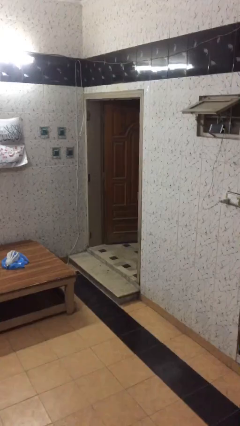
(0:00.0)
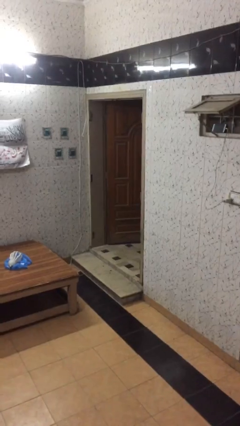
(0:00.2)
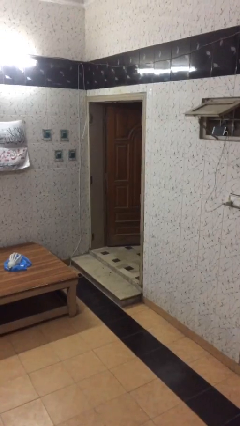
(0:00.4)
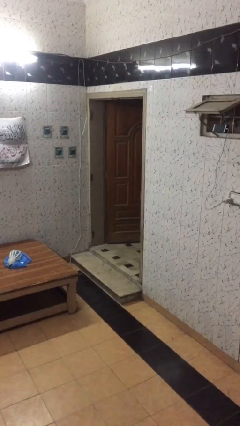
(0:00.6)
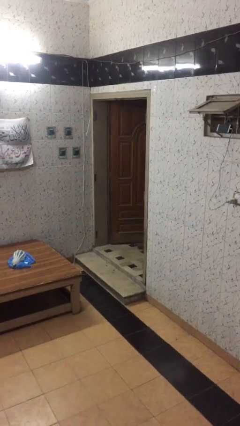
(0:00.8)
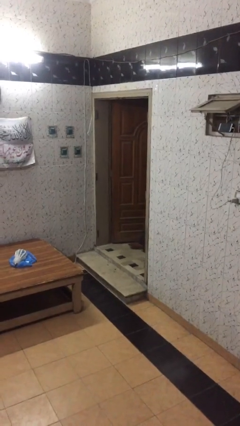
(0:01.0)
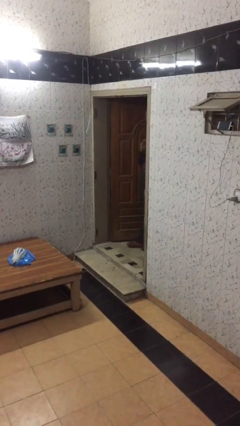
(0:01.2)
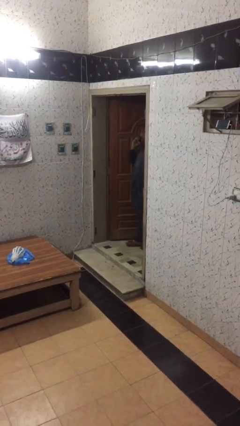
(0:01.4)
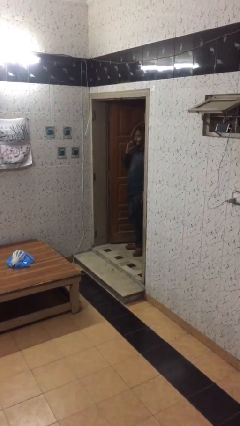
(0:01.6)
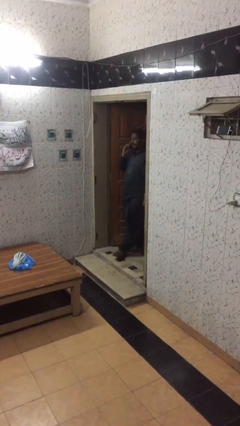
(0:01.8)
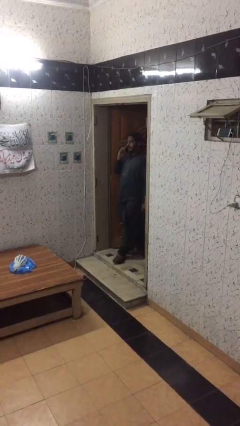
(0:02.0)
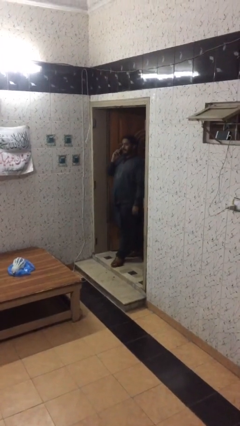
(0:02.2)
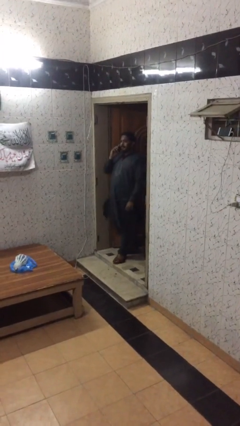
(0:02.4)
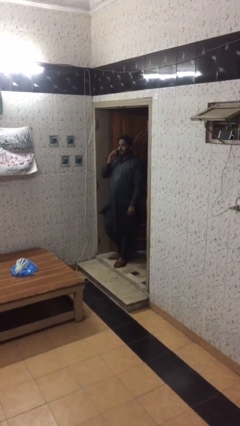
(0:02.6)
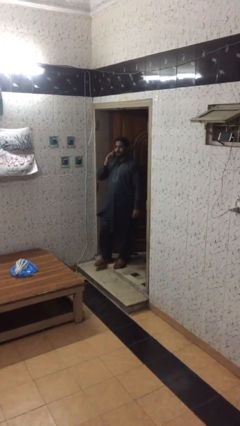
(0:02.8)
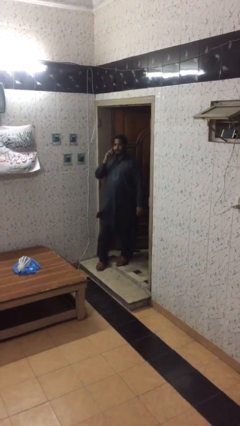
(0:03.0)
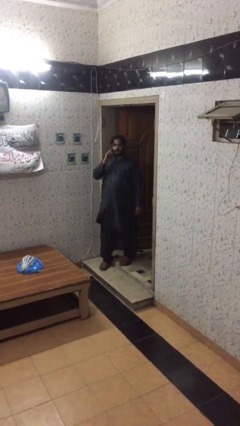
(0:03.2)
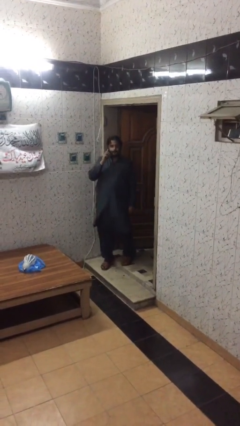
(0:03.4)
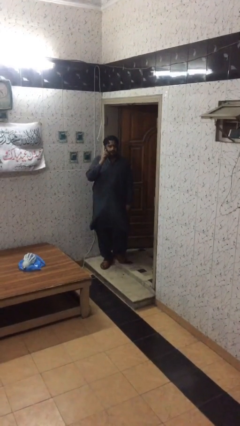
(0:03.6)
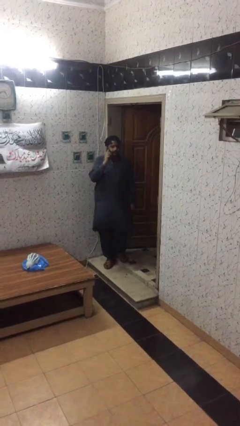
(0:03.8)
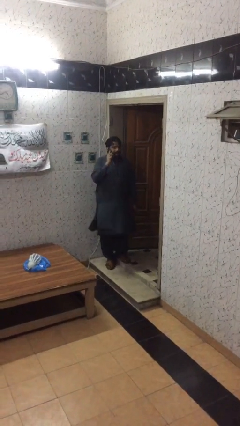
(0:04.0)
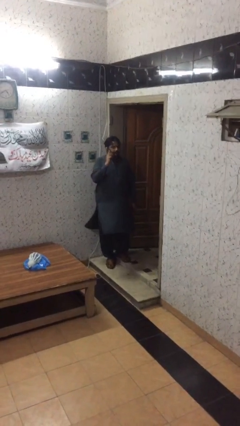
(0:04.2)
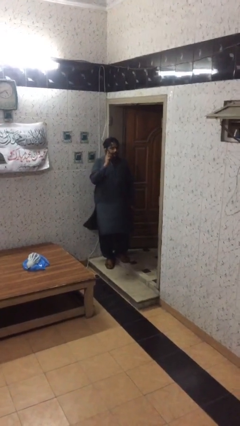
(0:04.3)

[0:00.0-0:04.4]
person enters scene through structure

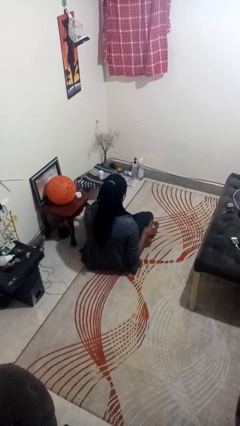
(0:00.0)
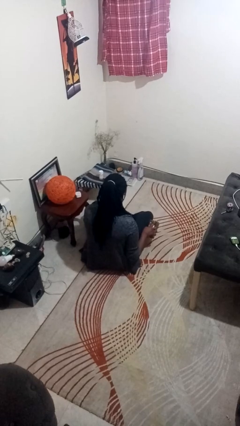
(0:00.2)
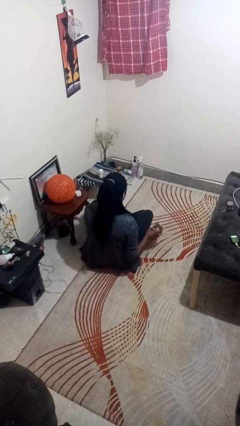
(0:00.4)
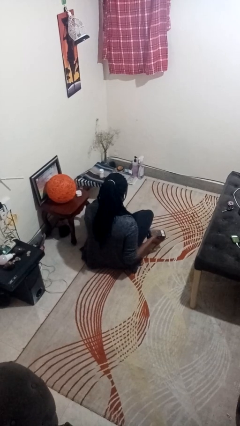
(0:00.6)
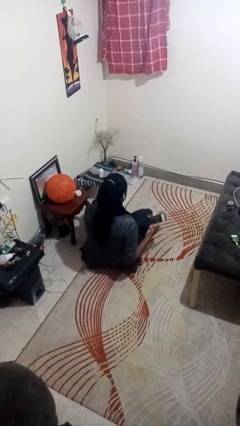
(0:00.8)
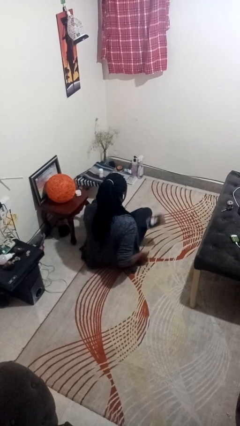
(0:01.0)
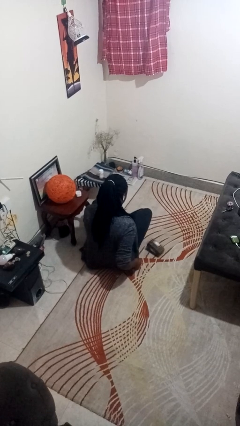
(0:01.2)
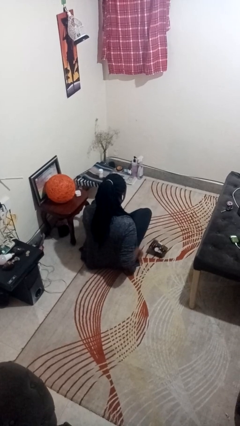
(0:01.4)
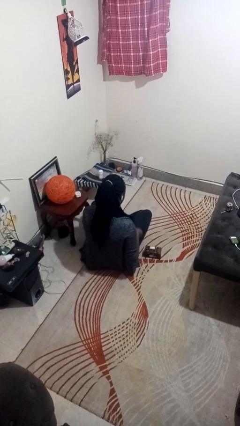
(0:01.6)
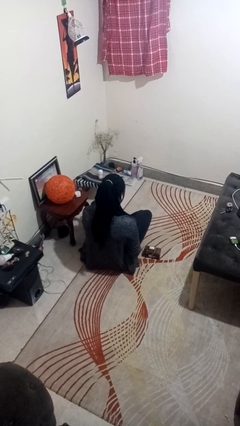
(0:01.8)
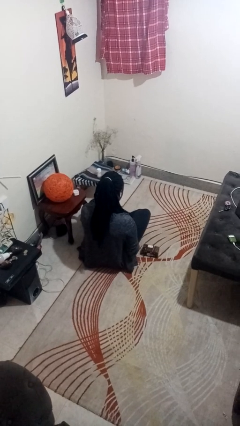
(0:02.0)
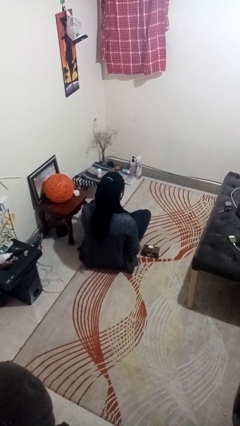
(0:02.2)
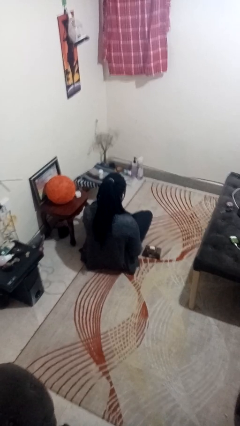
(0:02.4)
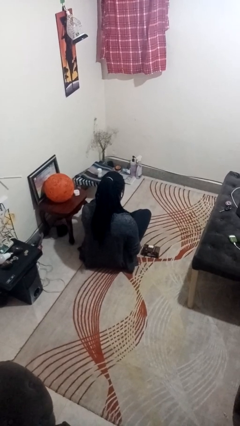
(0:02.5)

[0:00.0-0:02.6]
person throws object into air

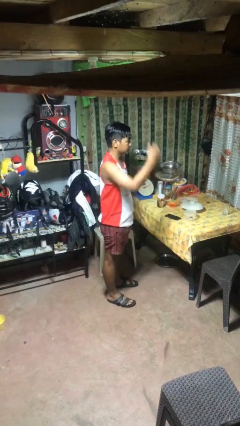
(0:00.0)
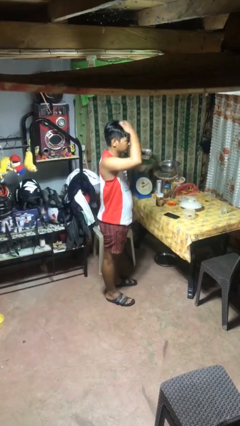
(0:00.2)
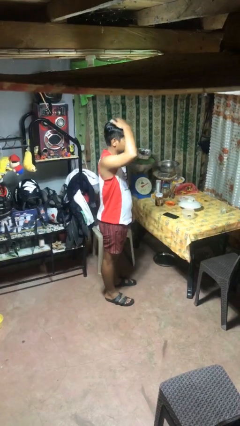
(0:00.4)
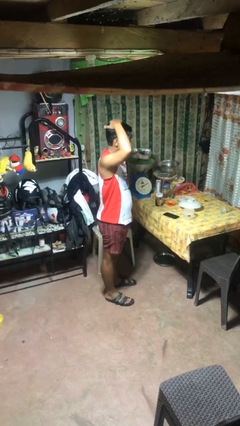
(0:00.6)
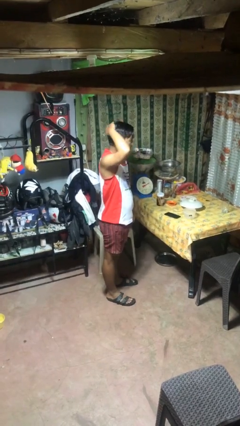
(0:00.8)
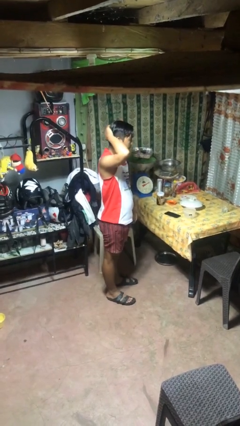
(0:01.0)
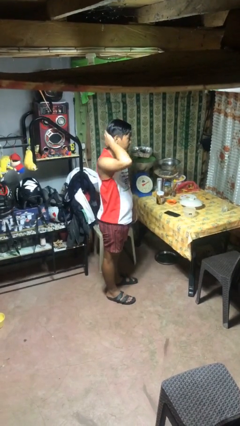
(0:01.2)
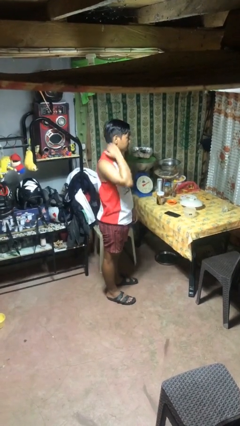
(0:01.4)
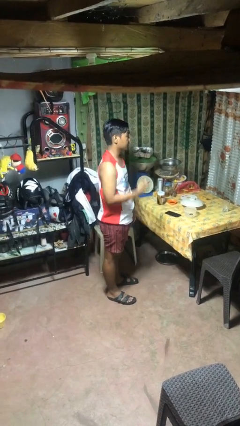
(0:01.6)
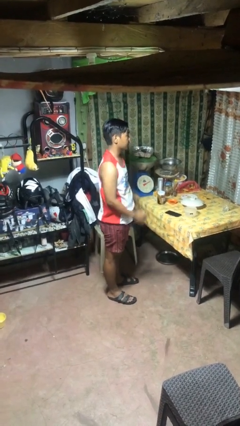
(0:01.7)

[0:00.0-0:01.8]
person pats head

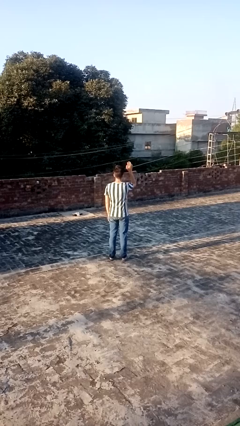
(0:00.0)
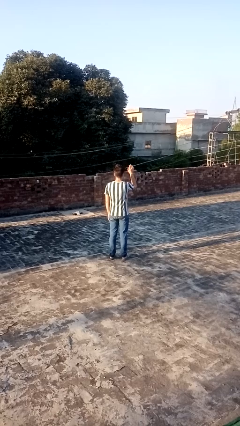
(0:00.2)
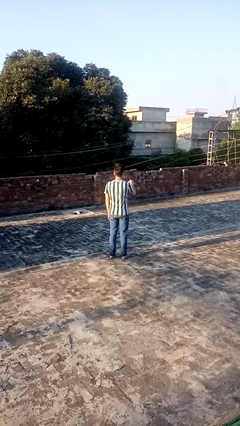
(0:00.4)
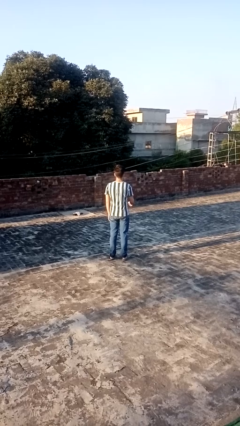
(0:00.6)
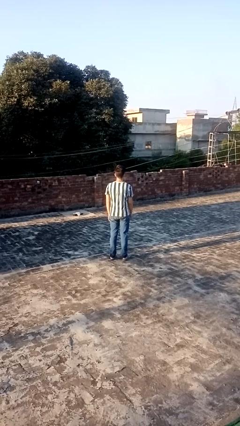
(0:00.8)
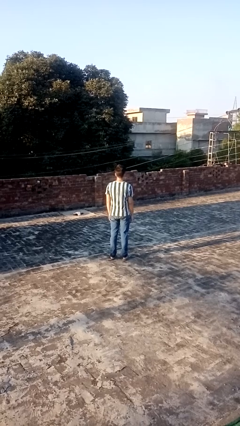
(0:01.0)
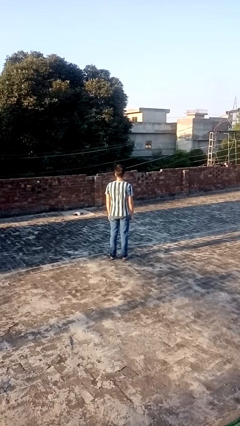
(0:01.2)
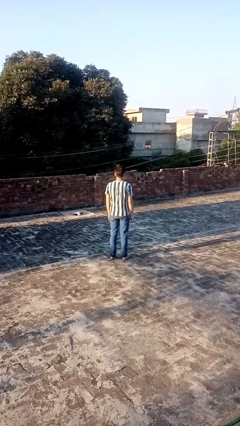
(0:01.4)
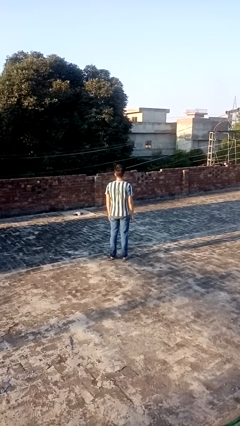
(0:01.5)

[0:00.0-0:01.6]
person gestures lower hand

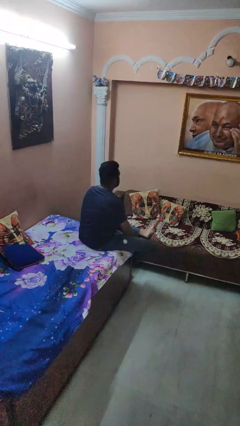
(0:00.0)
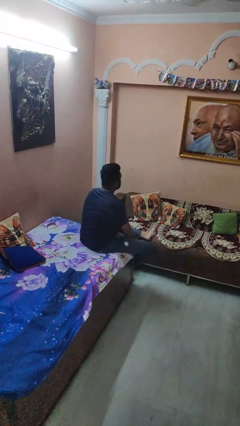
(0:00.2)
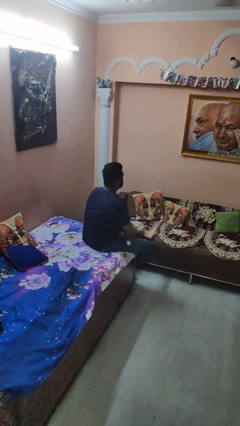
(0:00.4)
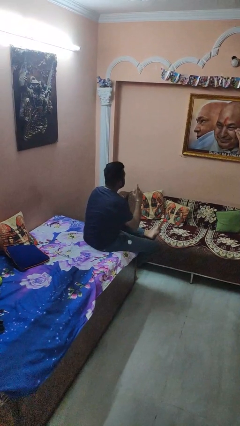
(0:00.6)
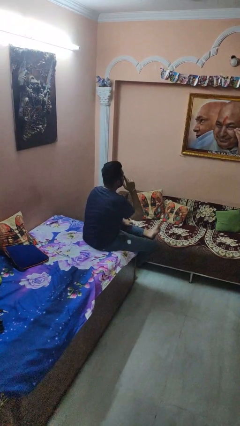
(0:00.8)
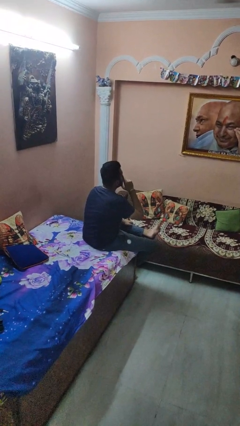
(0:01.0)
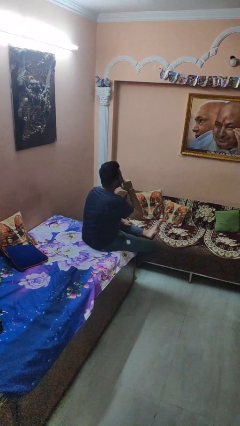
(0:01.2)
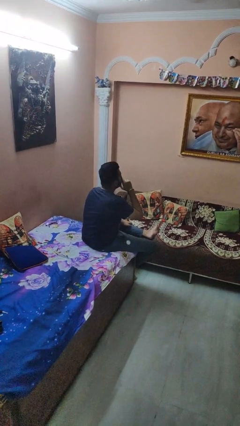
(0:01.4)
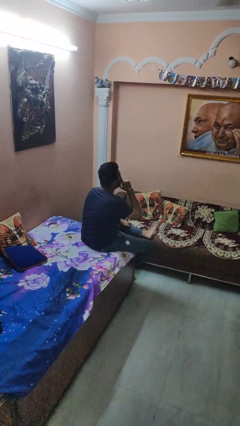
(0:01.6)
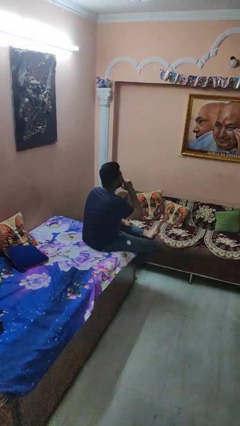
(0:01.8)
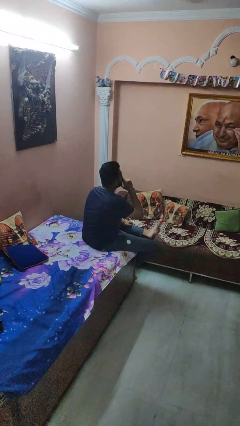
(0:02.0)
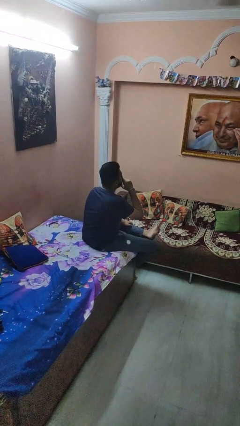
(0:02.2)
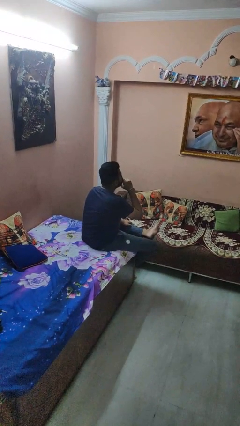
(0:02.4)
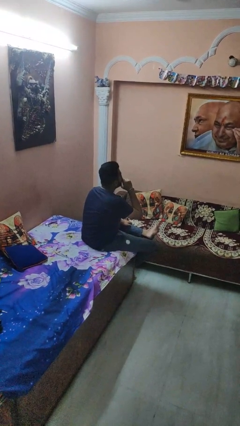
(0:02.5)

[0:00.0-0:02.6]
person gestures be quiet

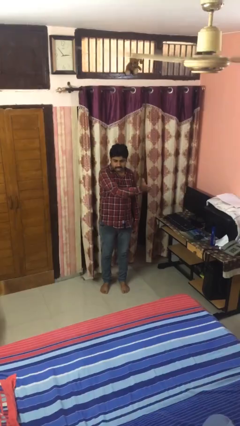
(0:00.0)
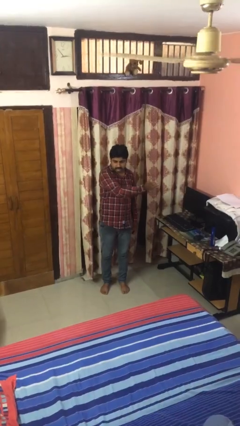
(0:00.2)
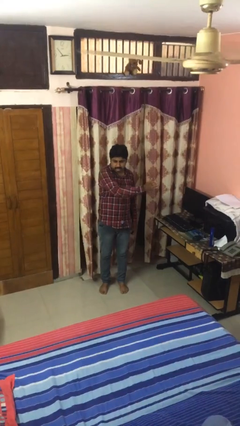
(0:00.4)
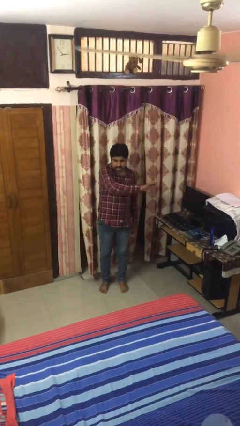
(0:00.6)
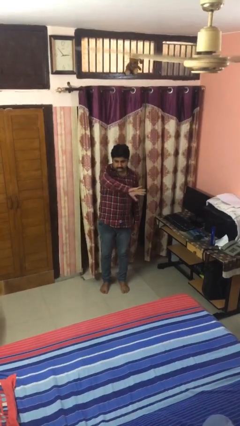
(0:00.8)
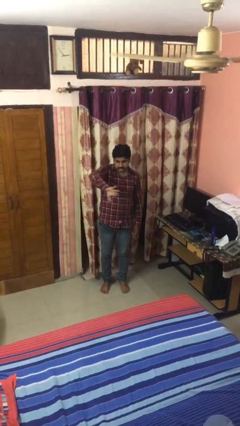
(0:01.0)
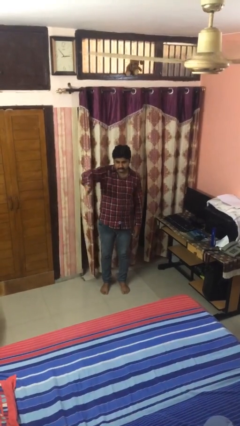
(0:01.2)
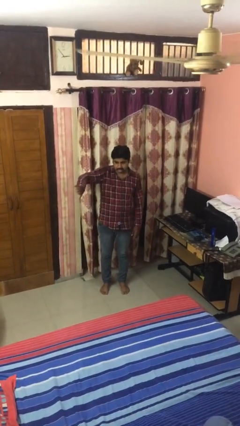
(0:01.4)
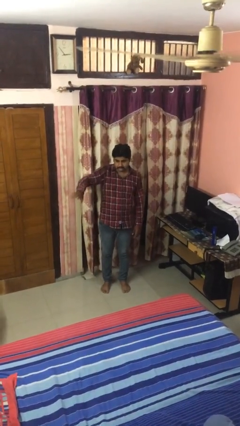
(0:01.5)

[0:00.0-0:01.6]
person gestures swipe right

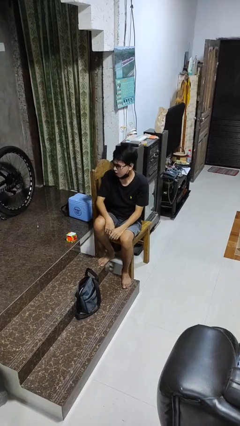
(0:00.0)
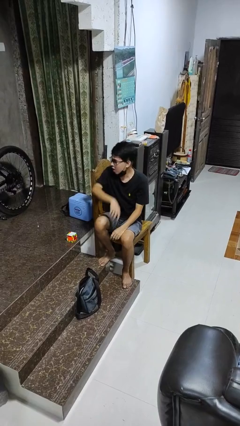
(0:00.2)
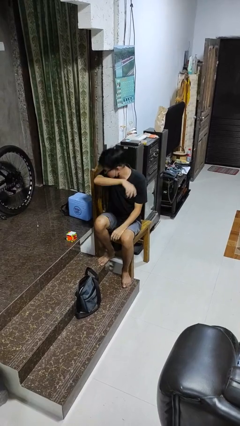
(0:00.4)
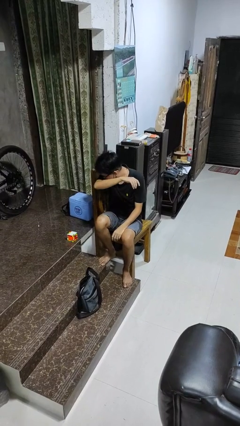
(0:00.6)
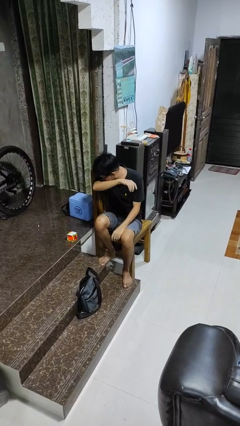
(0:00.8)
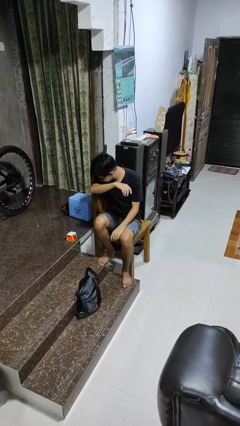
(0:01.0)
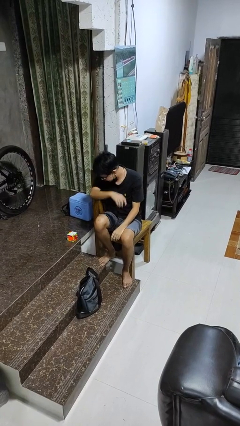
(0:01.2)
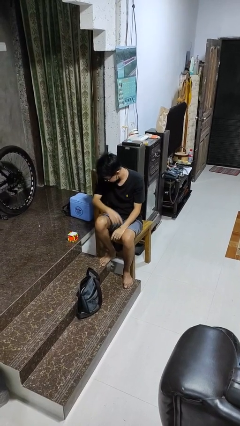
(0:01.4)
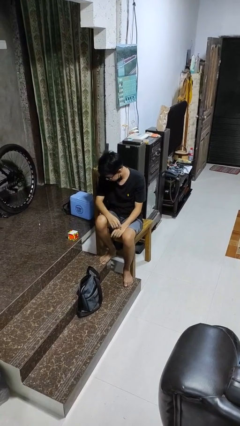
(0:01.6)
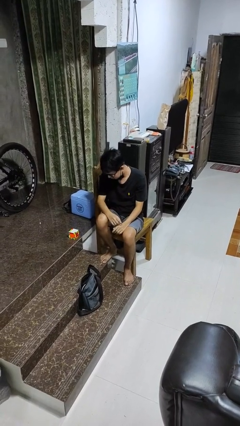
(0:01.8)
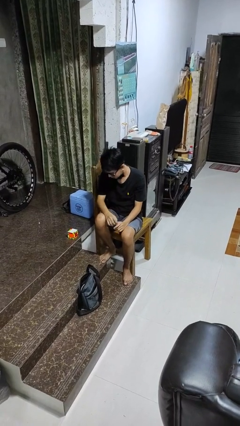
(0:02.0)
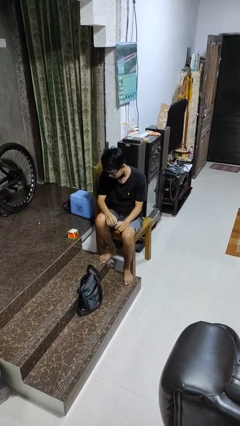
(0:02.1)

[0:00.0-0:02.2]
person sneezes into arm
